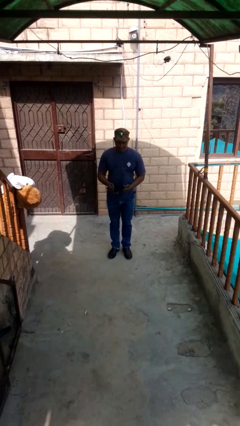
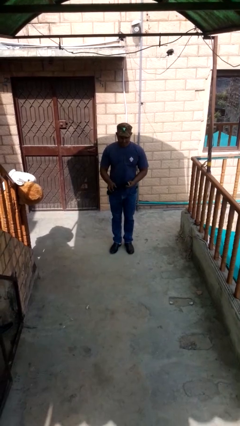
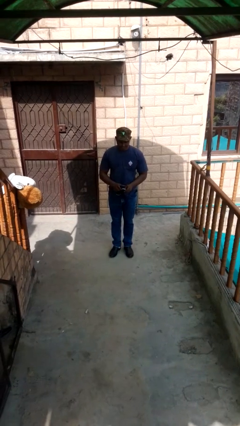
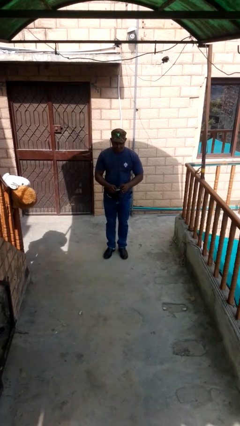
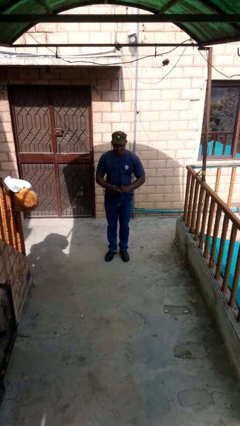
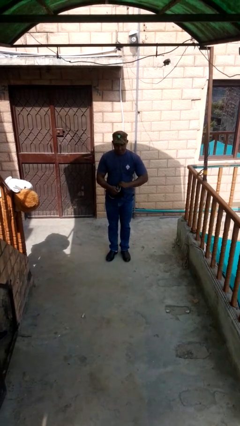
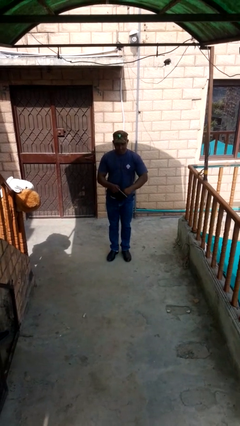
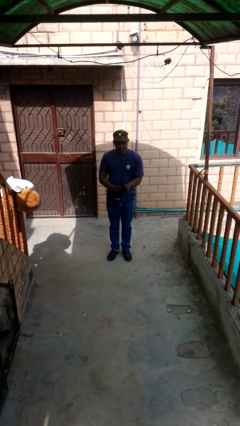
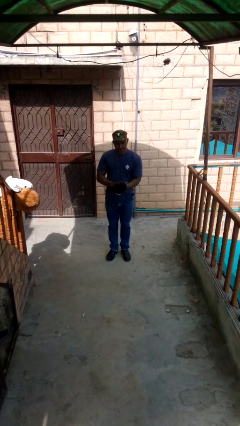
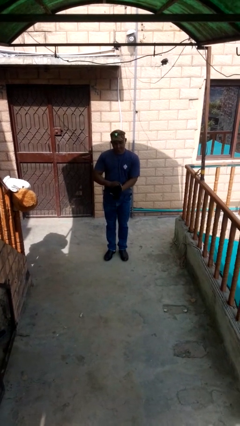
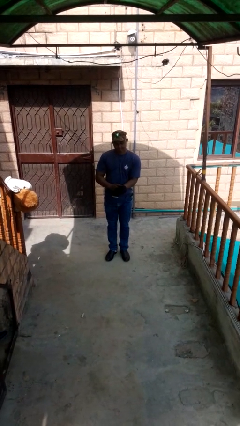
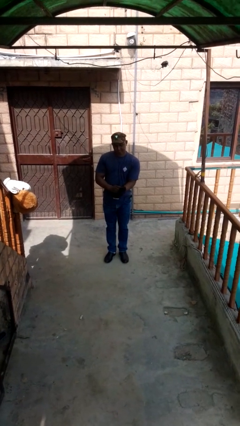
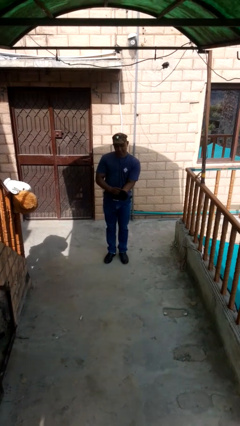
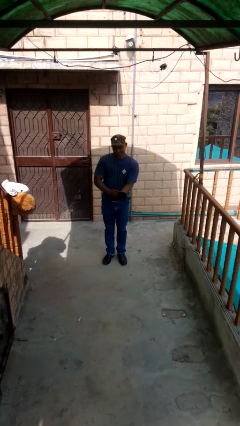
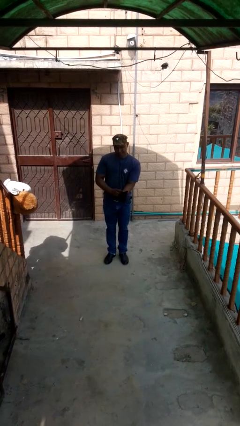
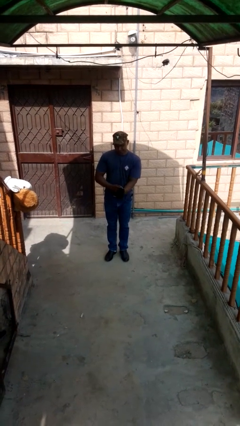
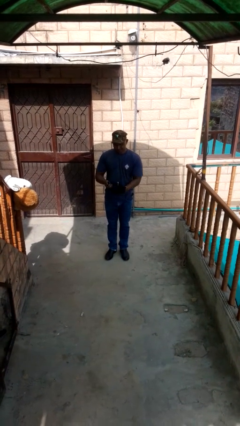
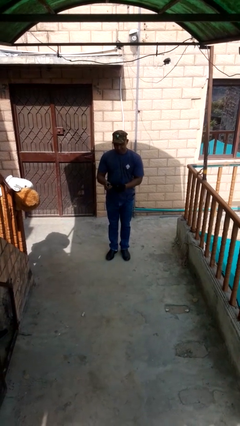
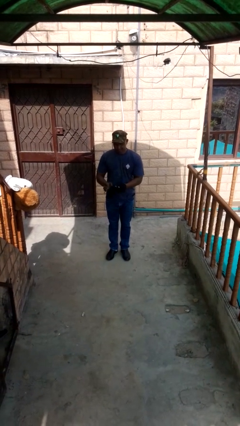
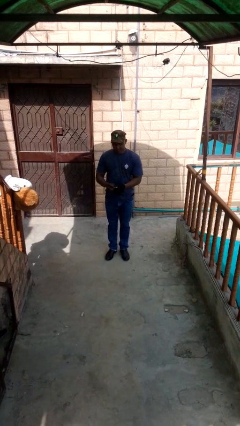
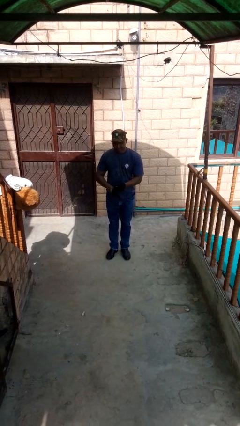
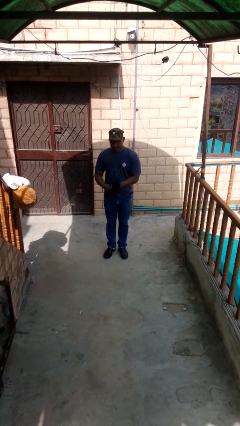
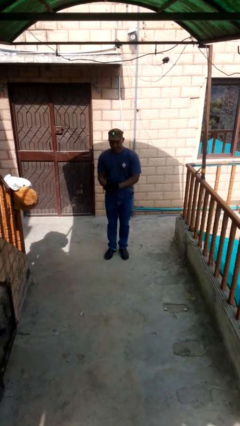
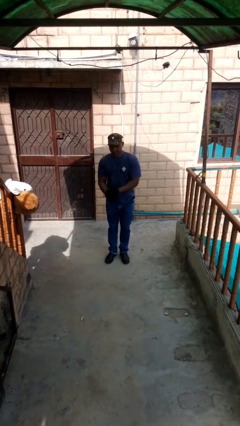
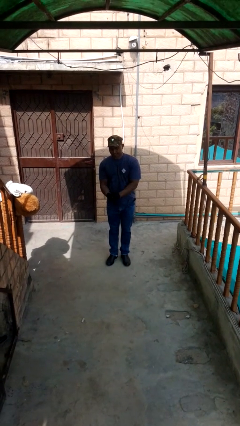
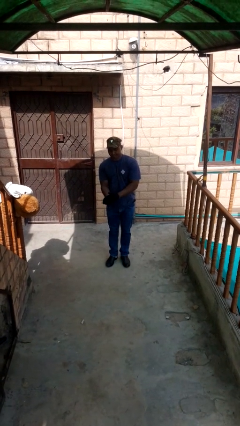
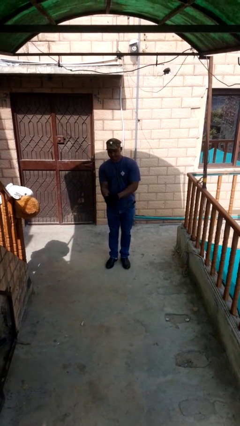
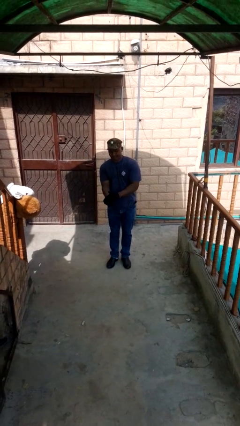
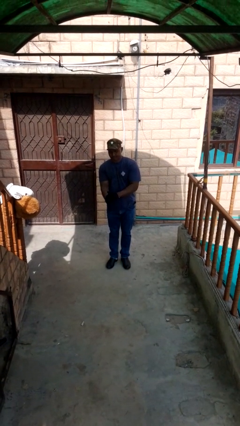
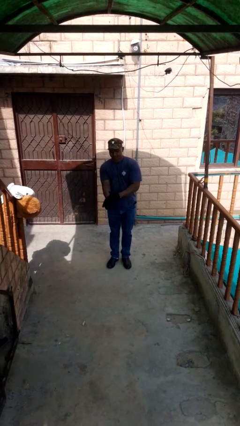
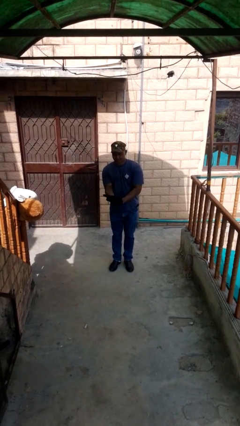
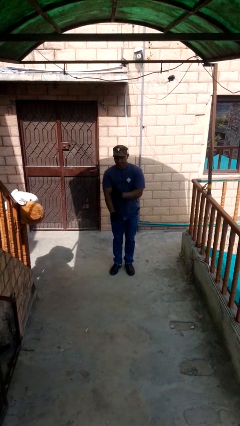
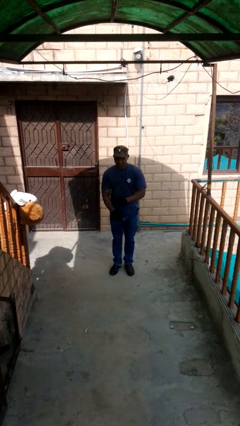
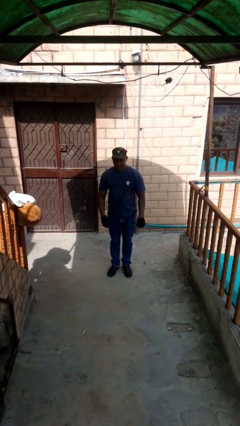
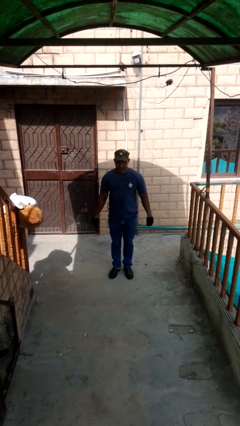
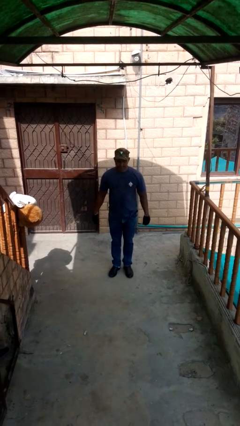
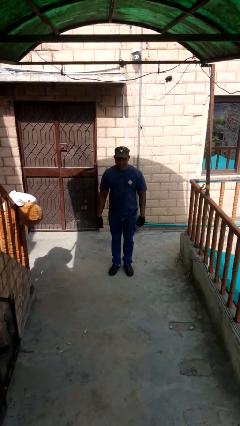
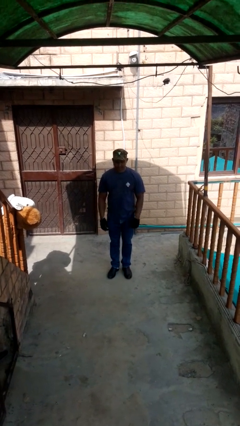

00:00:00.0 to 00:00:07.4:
person puts on gloves

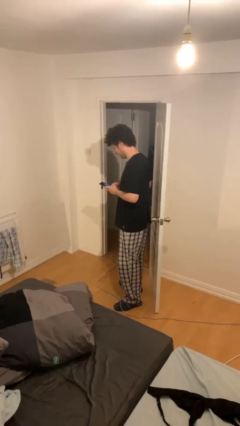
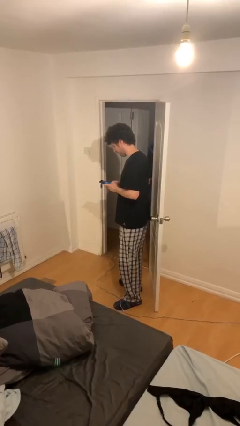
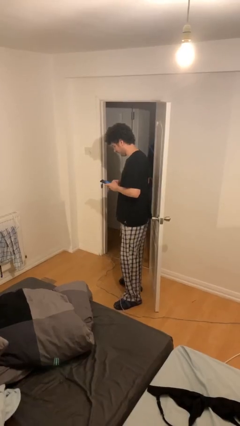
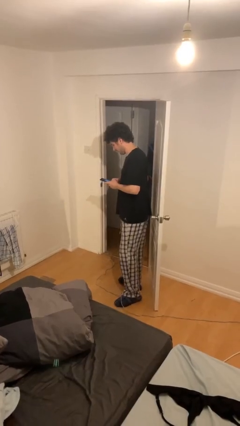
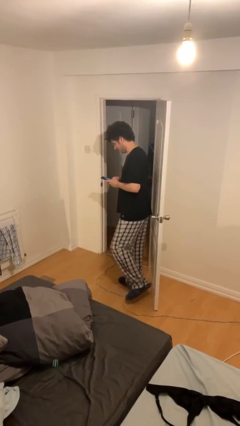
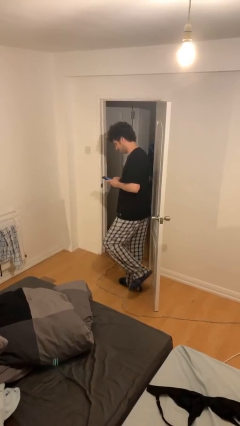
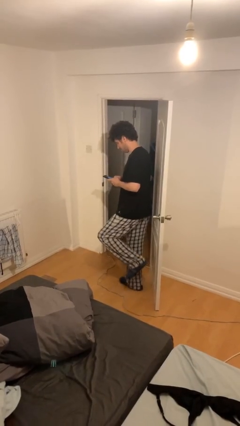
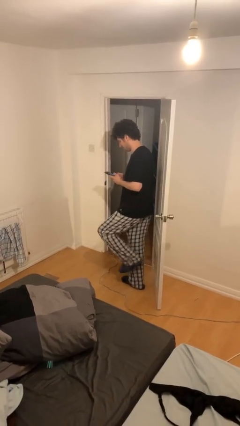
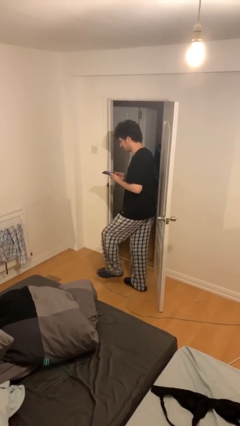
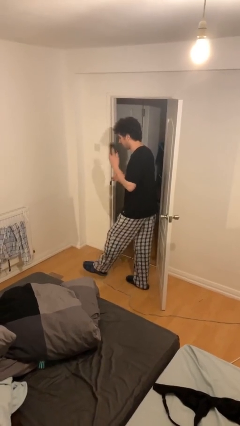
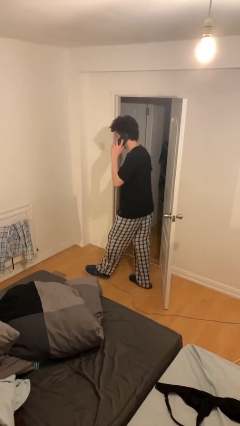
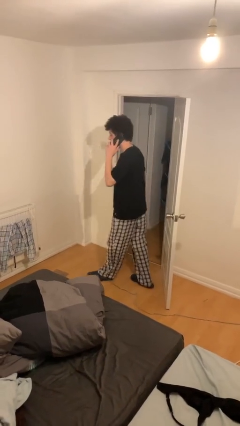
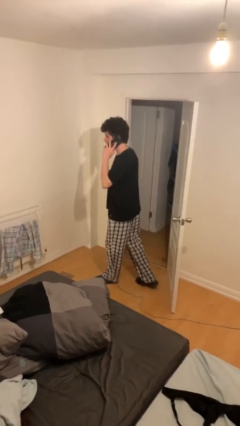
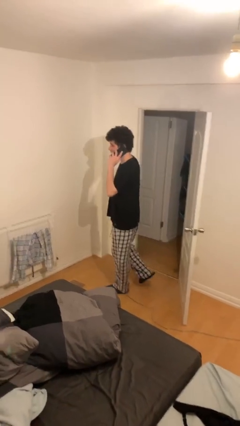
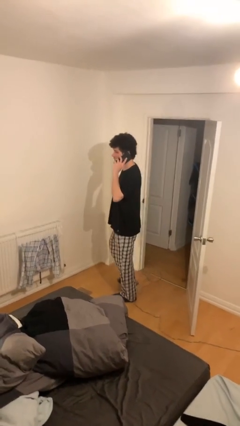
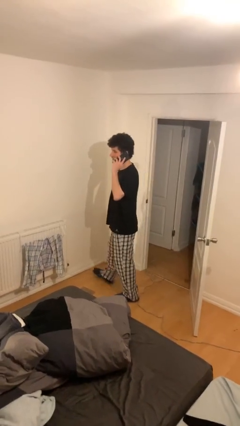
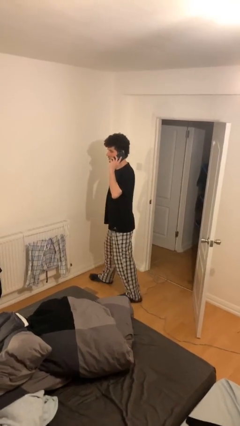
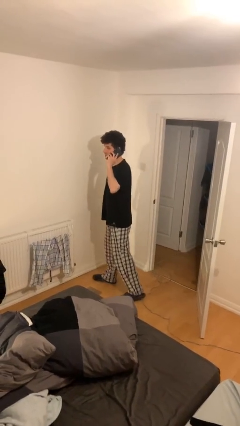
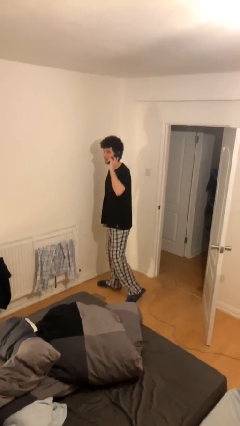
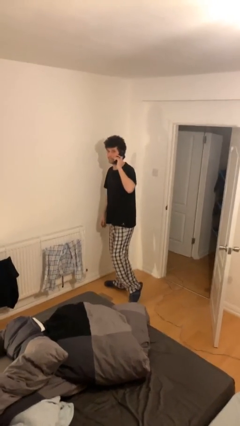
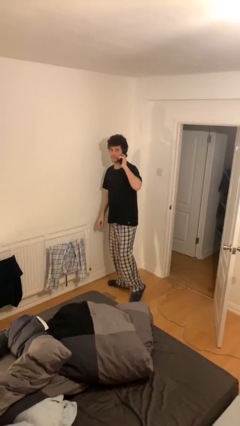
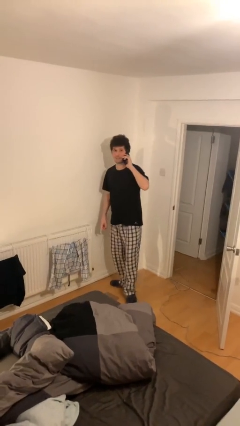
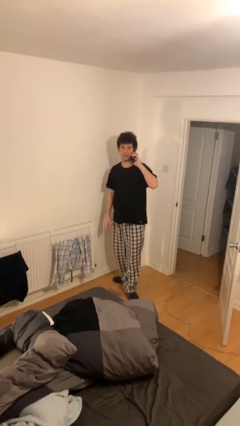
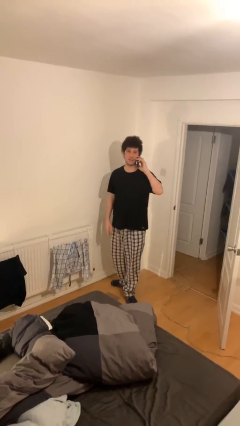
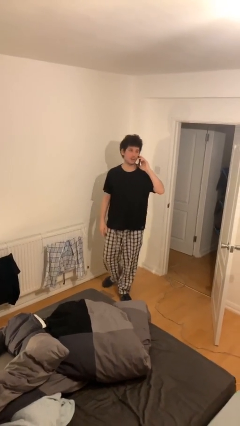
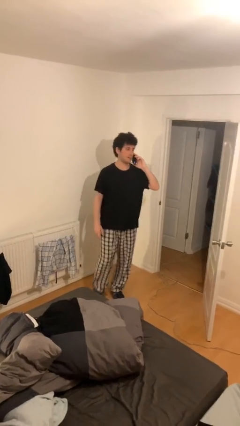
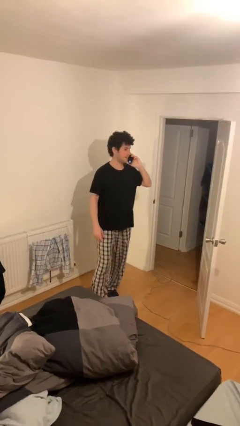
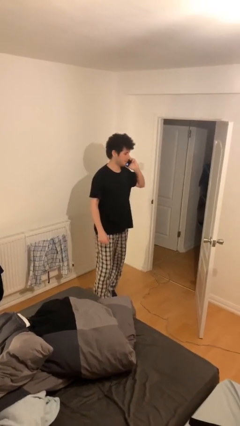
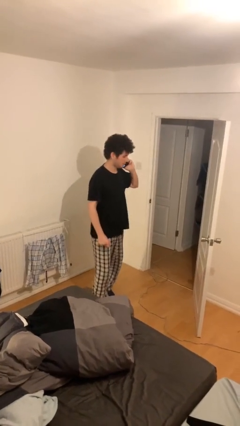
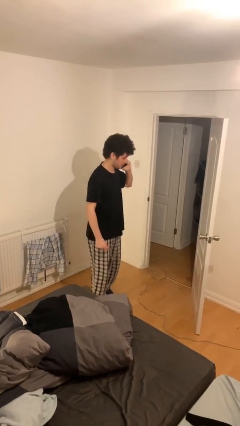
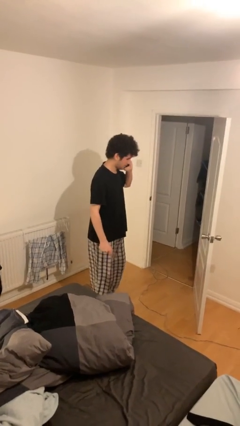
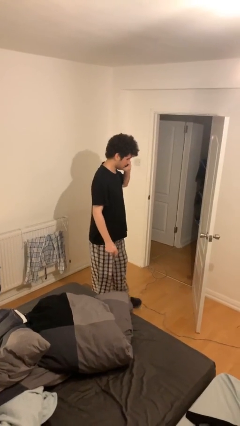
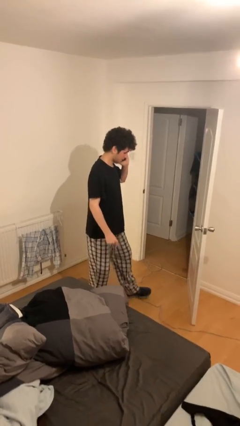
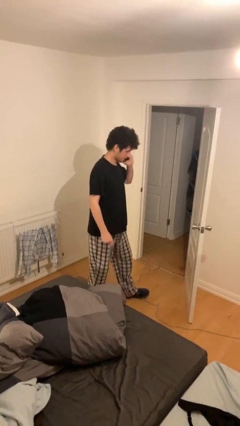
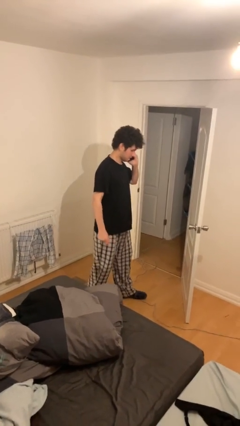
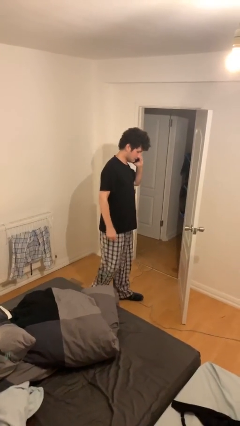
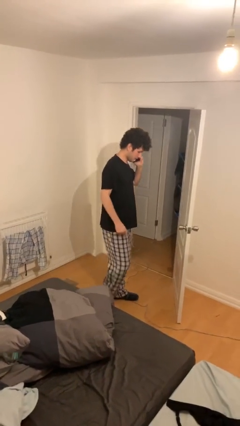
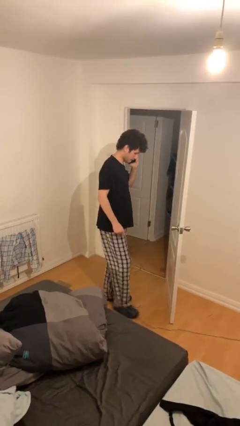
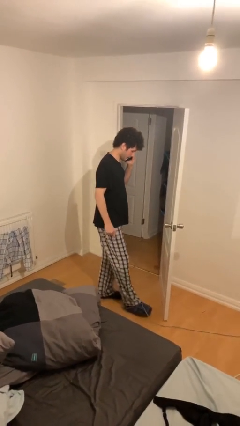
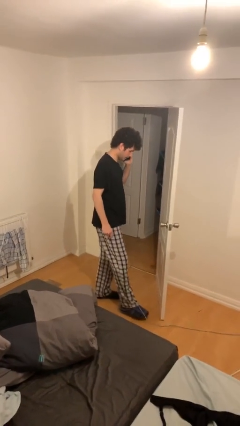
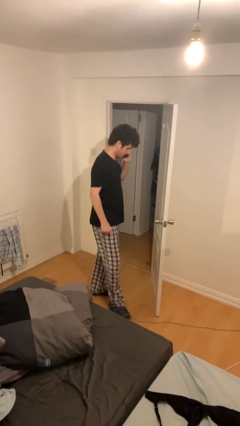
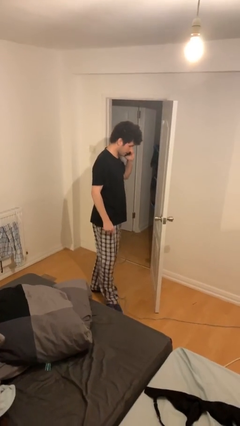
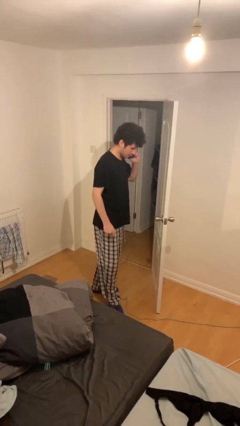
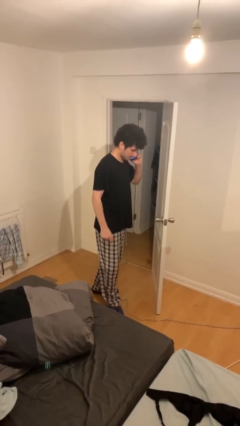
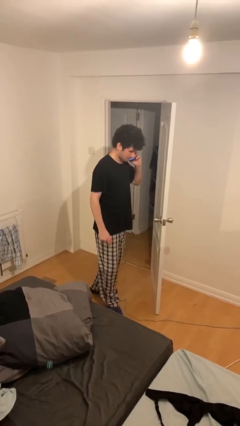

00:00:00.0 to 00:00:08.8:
person talks on phone

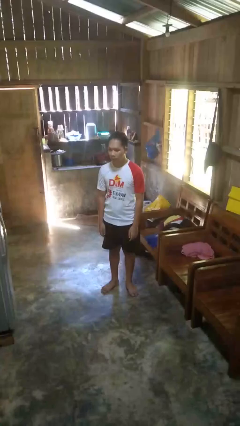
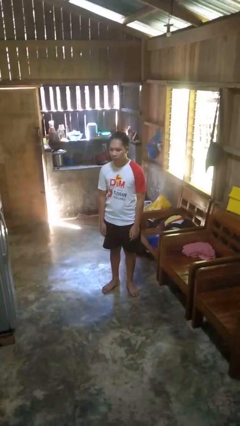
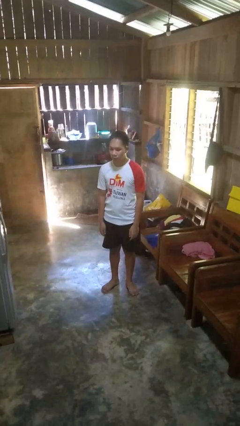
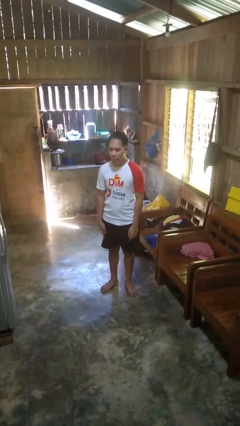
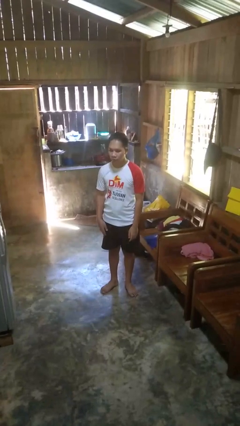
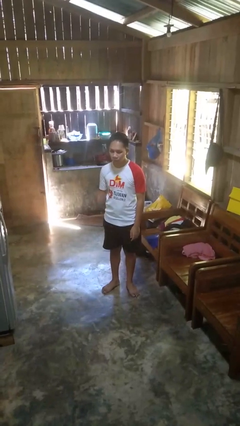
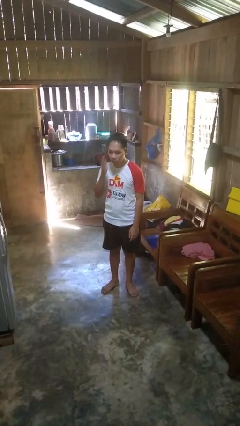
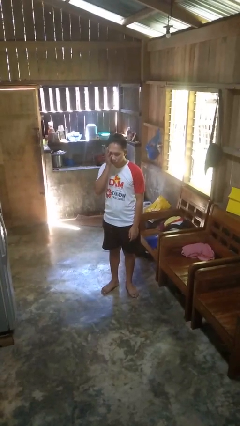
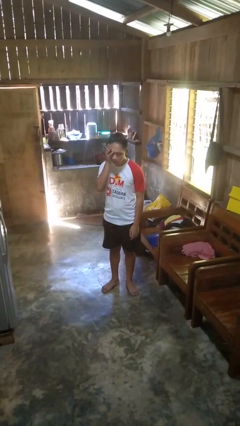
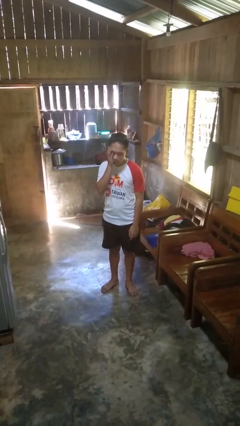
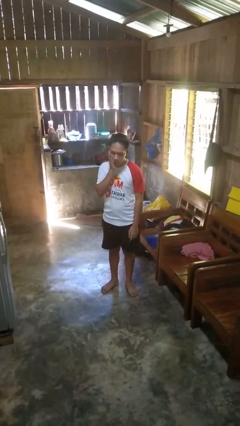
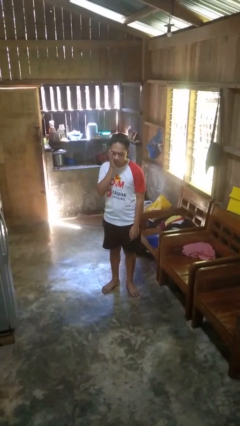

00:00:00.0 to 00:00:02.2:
person scratches face
